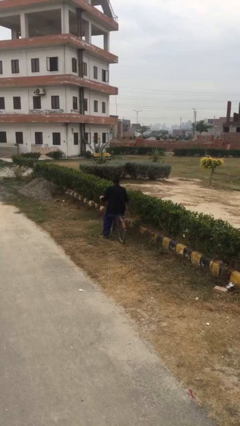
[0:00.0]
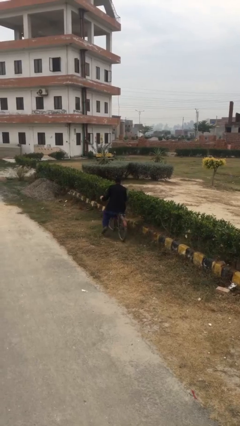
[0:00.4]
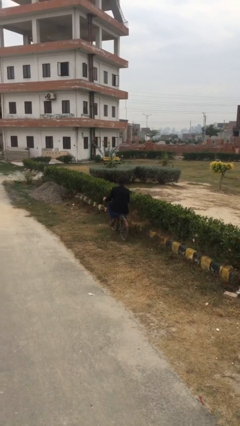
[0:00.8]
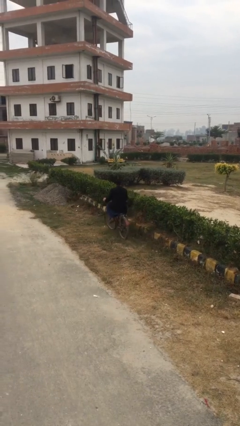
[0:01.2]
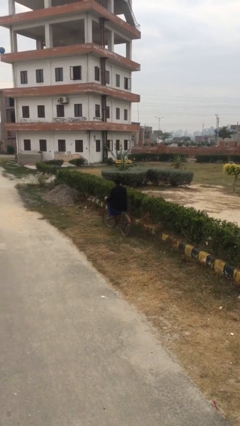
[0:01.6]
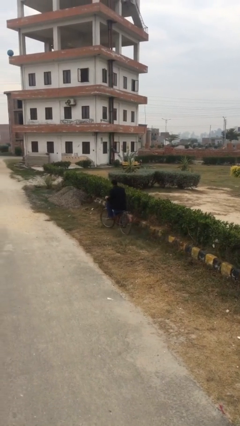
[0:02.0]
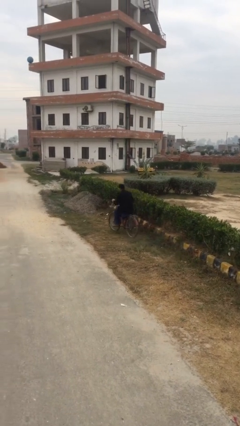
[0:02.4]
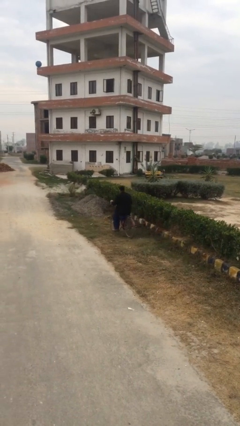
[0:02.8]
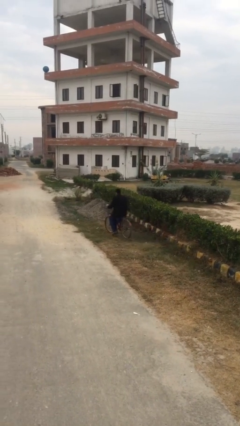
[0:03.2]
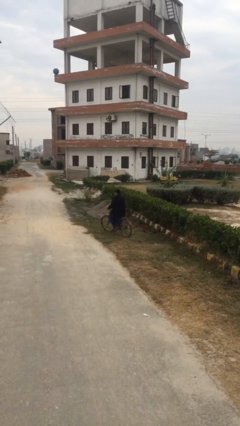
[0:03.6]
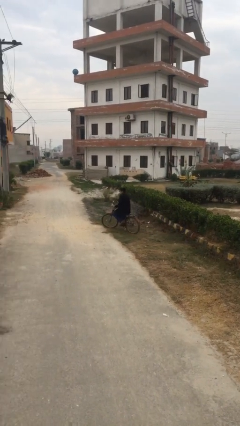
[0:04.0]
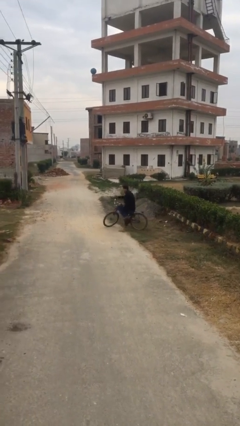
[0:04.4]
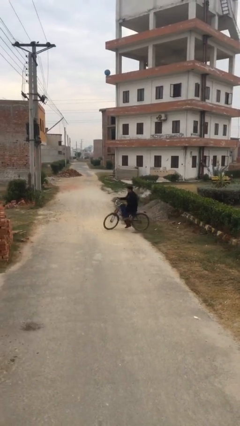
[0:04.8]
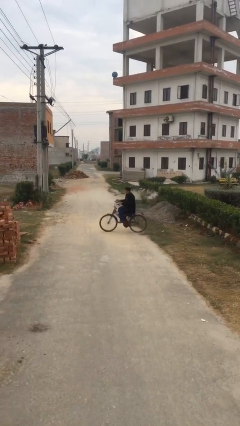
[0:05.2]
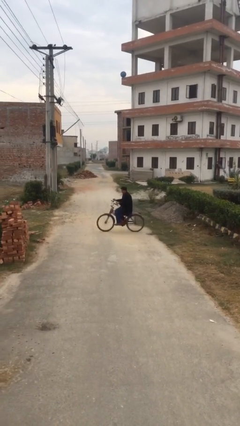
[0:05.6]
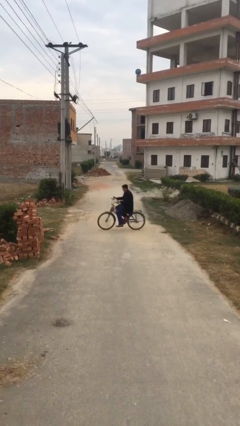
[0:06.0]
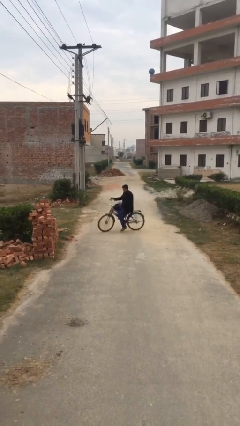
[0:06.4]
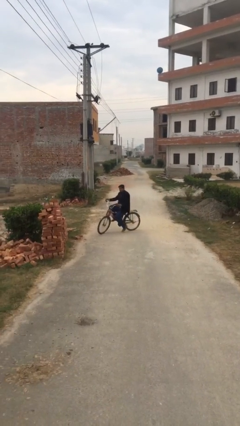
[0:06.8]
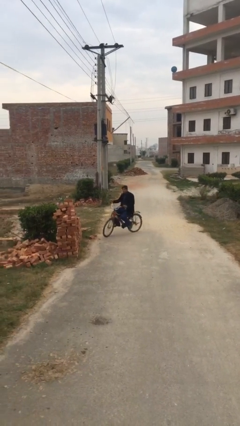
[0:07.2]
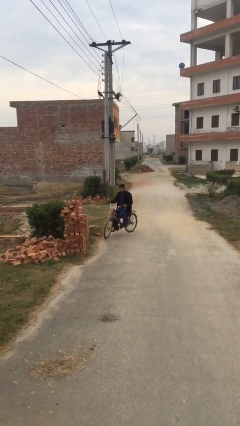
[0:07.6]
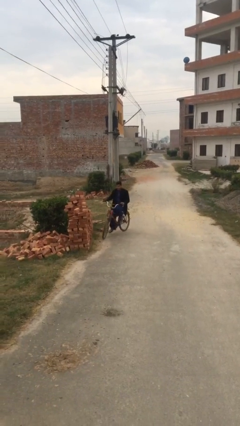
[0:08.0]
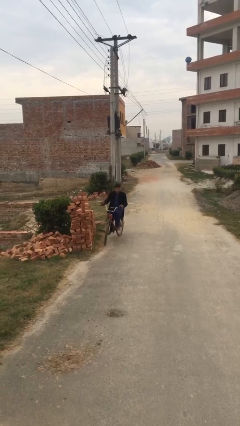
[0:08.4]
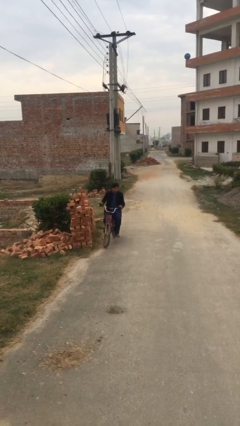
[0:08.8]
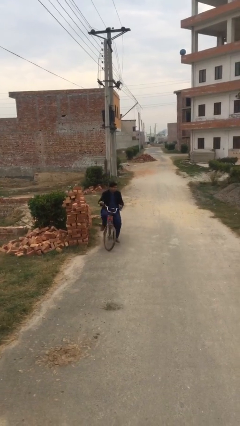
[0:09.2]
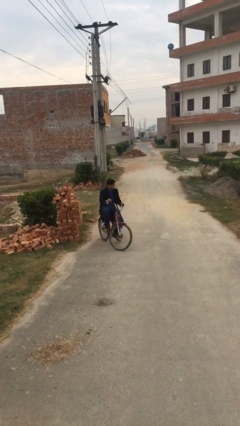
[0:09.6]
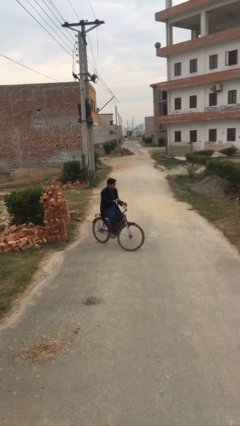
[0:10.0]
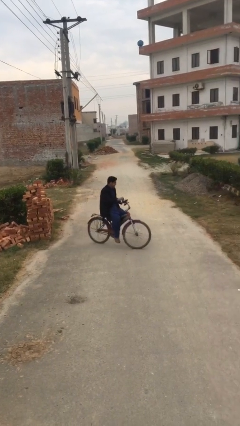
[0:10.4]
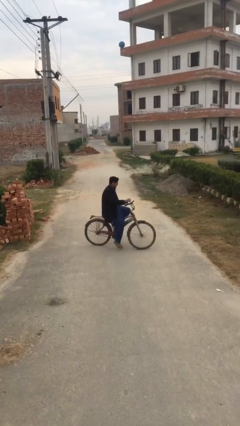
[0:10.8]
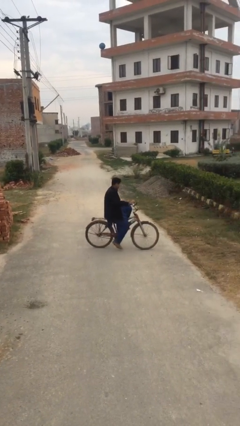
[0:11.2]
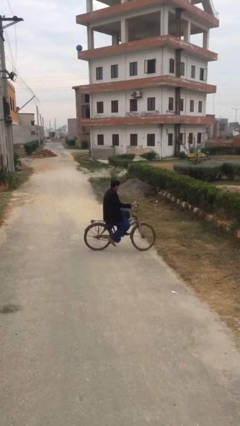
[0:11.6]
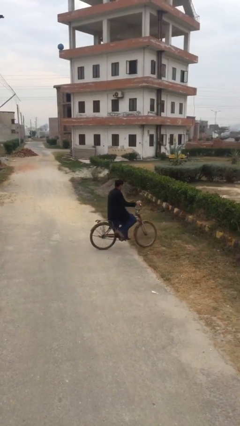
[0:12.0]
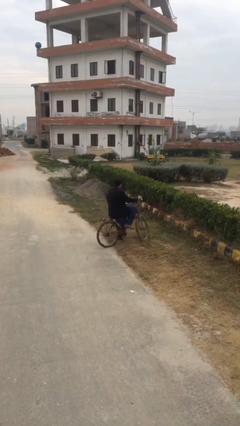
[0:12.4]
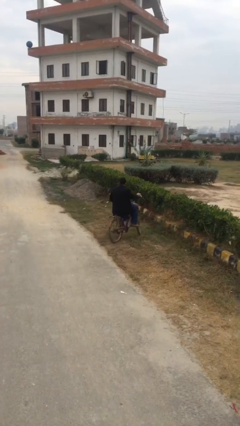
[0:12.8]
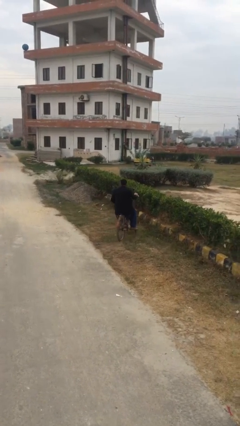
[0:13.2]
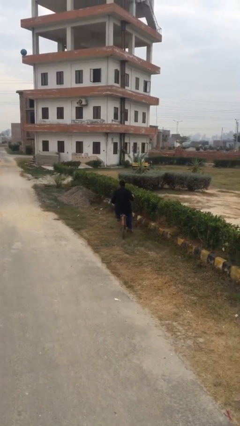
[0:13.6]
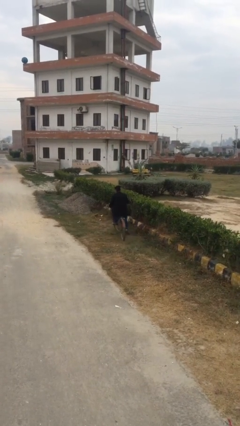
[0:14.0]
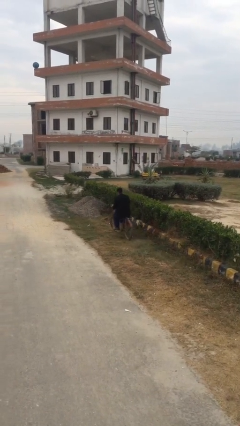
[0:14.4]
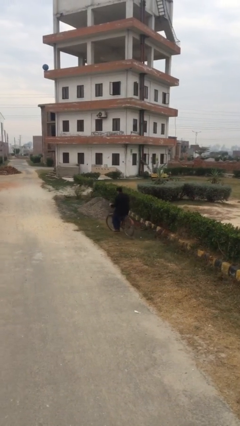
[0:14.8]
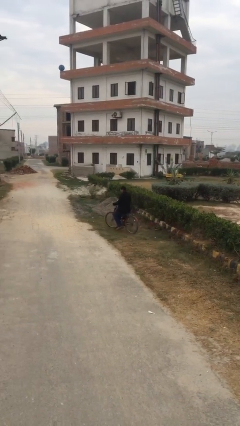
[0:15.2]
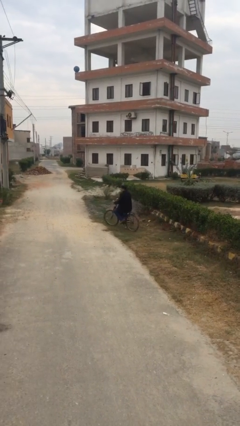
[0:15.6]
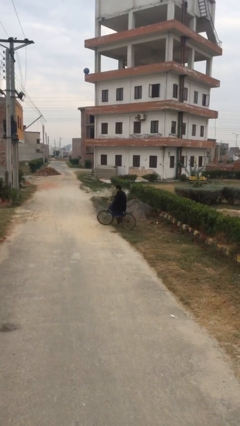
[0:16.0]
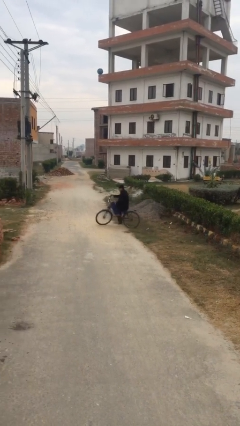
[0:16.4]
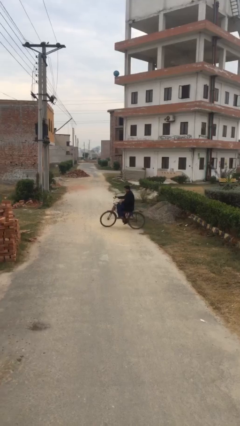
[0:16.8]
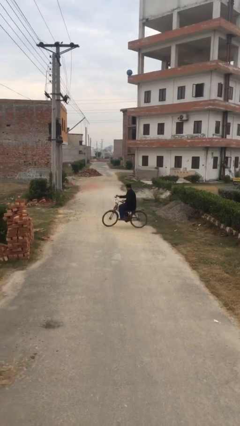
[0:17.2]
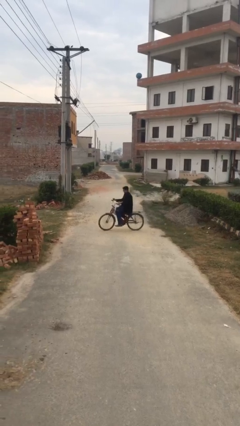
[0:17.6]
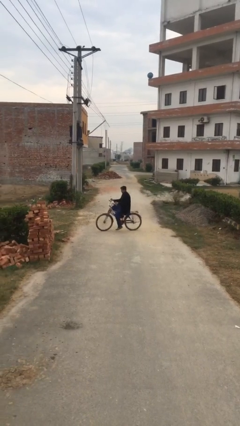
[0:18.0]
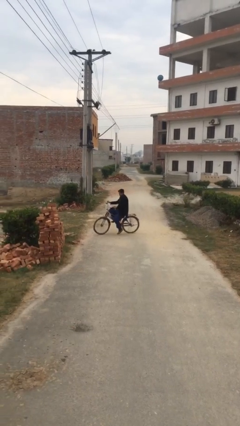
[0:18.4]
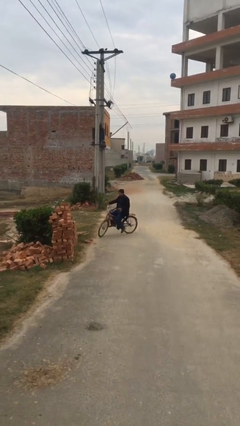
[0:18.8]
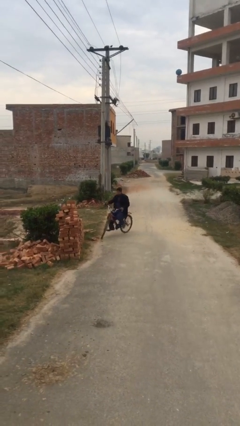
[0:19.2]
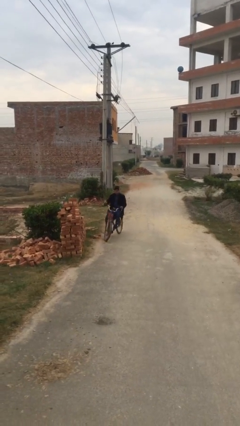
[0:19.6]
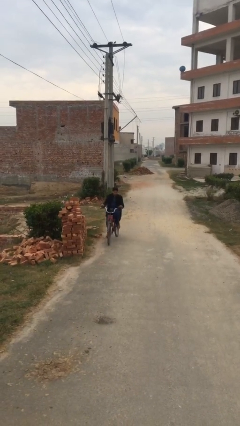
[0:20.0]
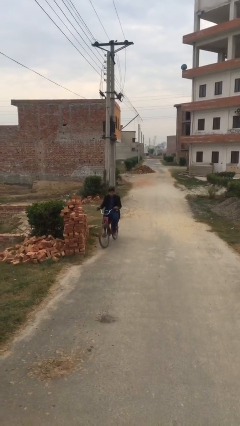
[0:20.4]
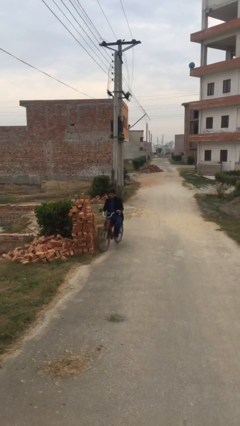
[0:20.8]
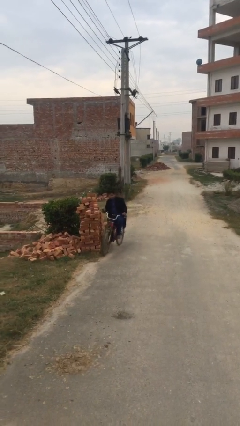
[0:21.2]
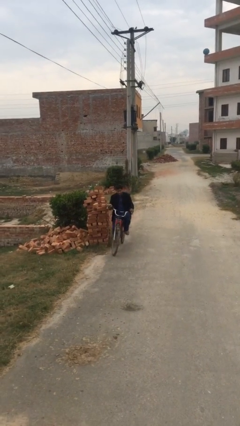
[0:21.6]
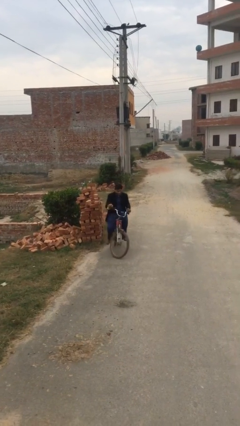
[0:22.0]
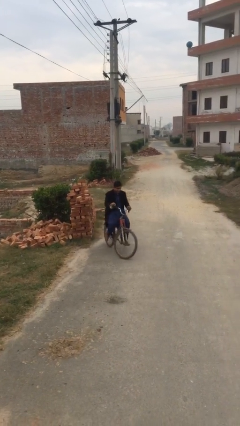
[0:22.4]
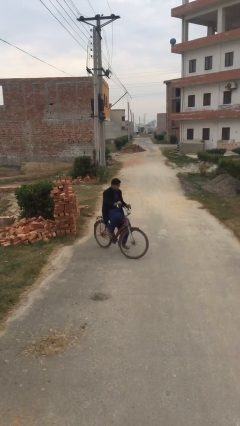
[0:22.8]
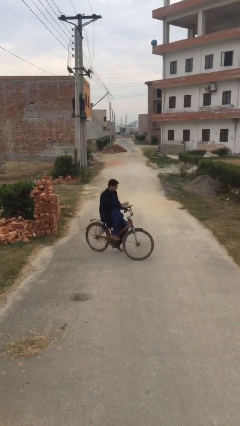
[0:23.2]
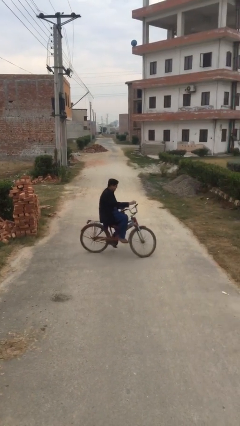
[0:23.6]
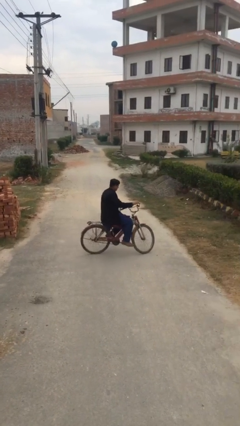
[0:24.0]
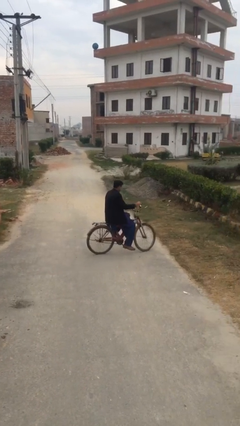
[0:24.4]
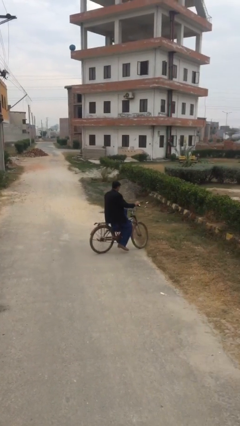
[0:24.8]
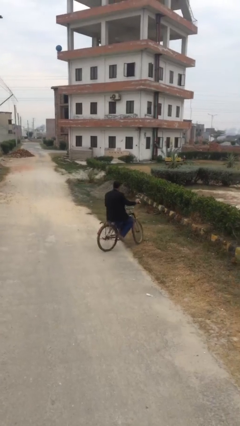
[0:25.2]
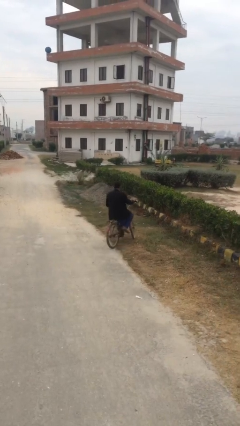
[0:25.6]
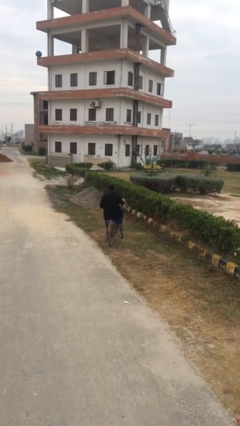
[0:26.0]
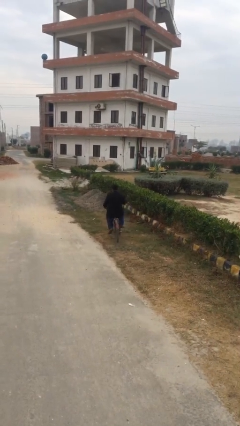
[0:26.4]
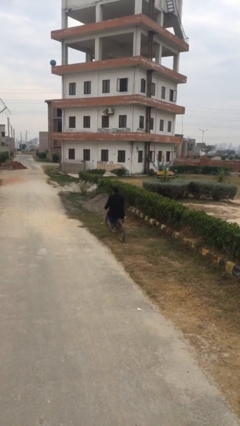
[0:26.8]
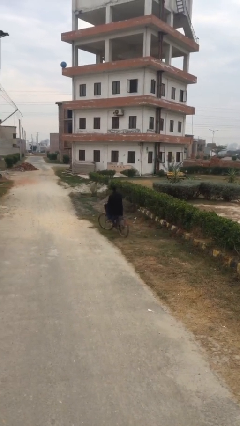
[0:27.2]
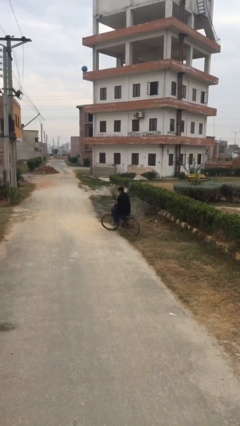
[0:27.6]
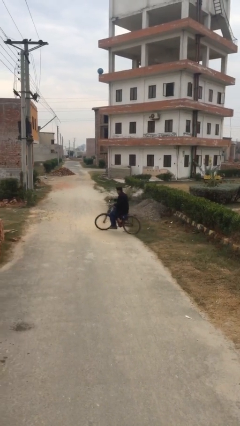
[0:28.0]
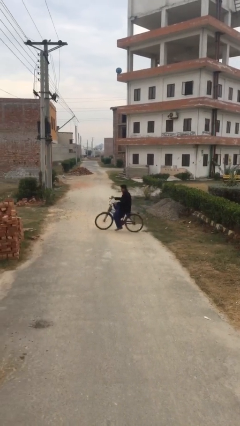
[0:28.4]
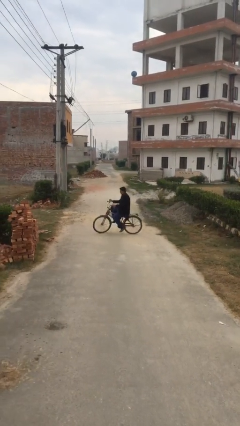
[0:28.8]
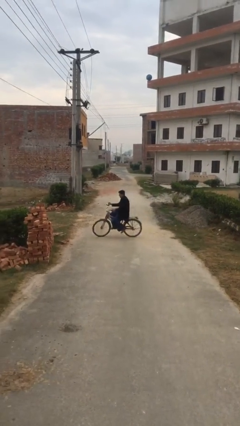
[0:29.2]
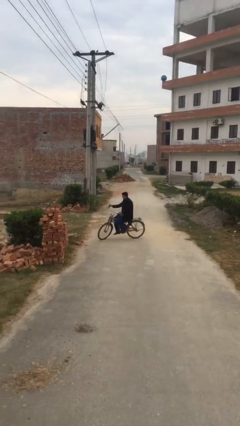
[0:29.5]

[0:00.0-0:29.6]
person rides bicycle

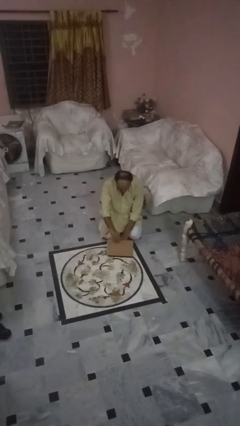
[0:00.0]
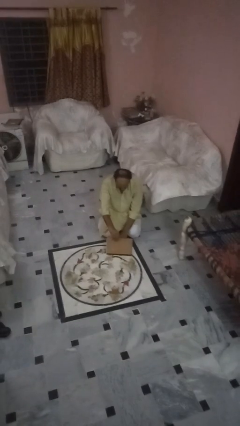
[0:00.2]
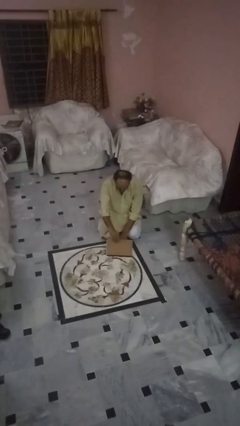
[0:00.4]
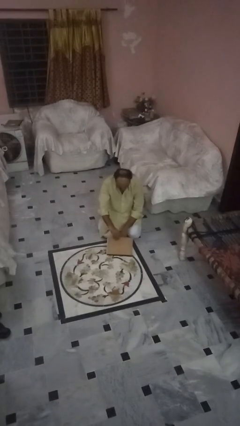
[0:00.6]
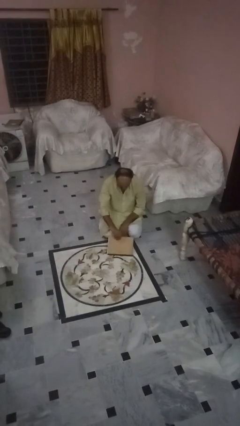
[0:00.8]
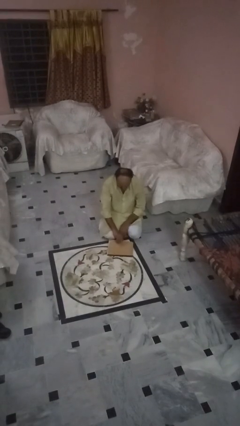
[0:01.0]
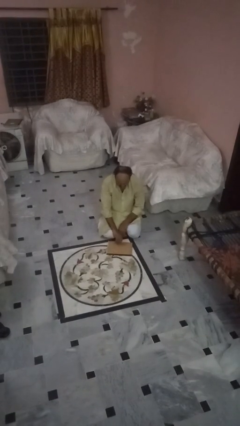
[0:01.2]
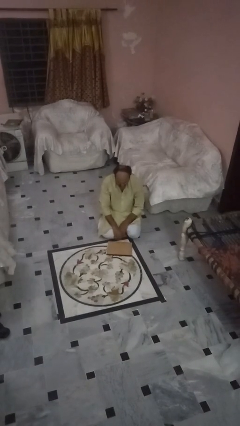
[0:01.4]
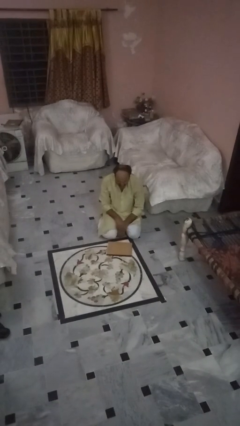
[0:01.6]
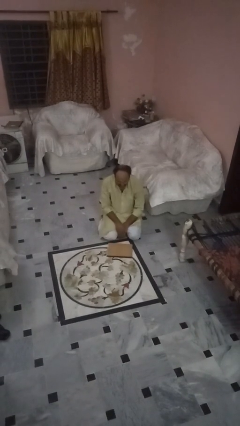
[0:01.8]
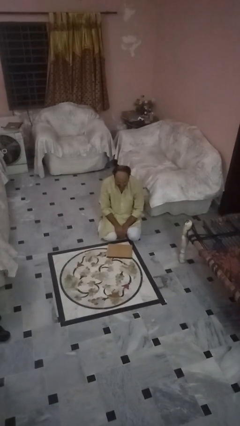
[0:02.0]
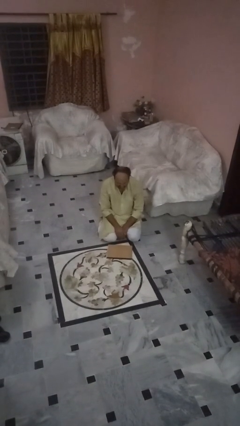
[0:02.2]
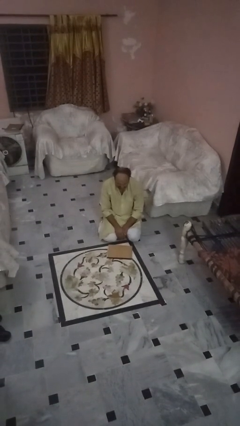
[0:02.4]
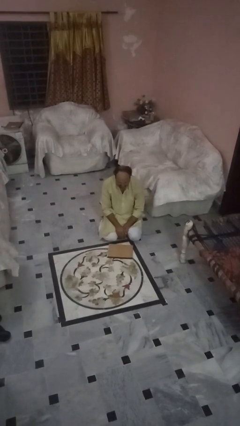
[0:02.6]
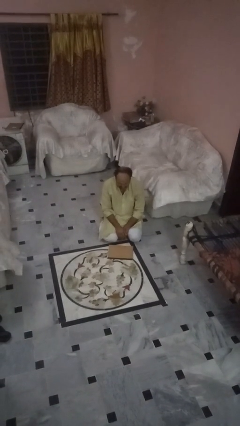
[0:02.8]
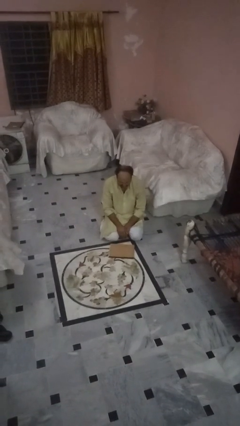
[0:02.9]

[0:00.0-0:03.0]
person closes laptop

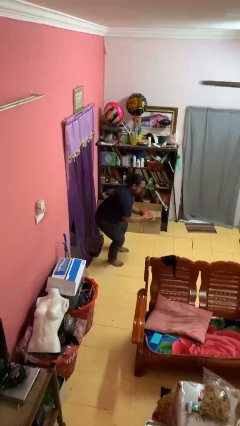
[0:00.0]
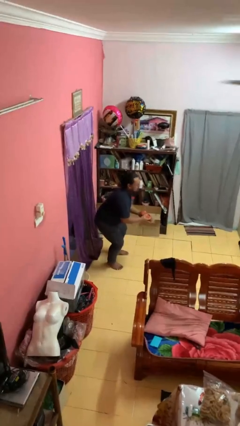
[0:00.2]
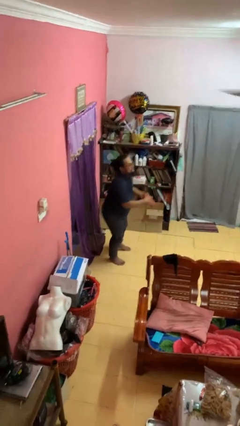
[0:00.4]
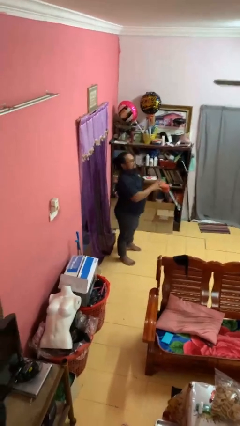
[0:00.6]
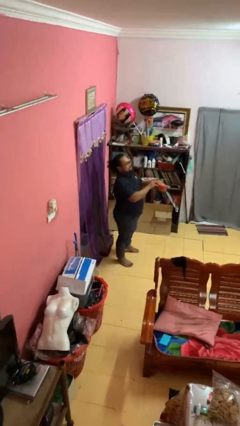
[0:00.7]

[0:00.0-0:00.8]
person catches dropped object
